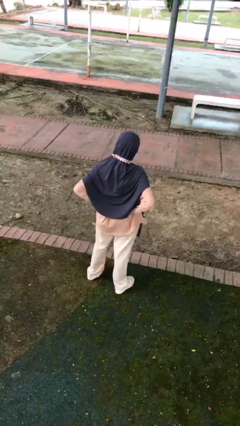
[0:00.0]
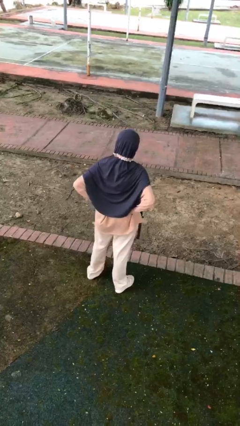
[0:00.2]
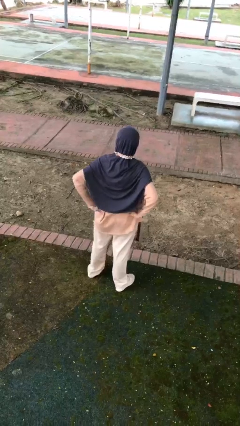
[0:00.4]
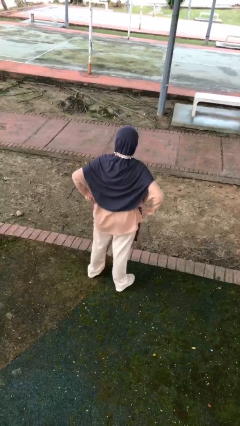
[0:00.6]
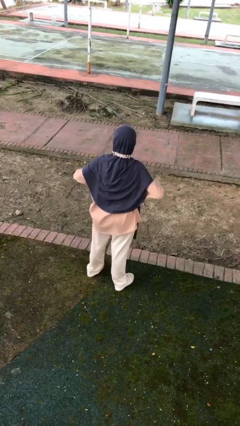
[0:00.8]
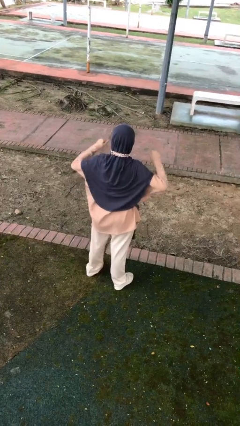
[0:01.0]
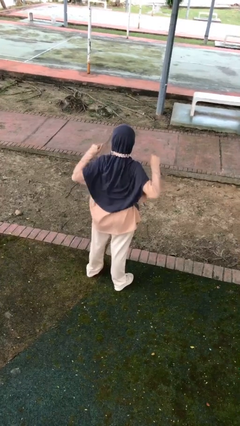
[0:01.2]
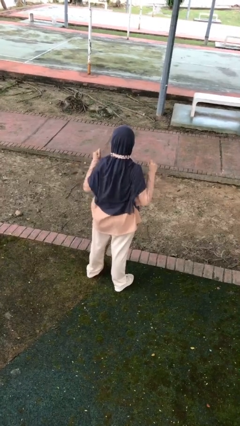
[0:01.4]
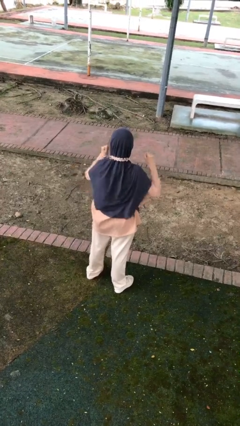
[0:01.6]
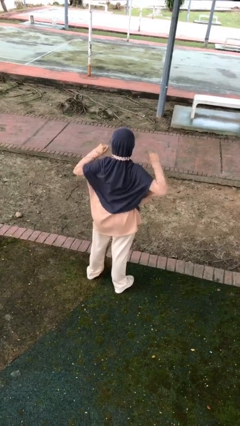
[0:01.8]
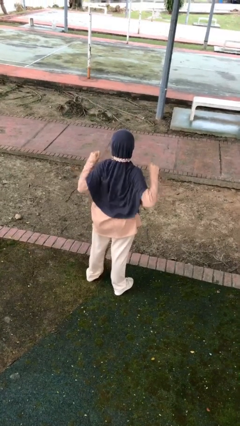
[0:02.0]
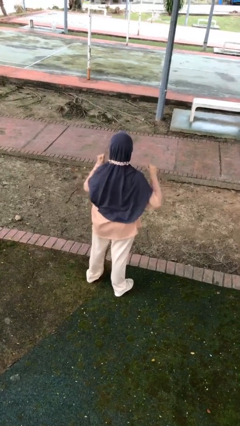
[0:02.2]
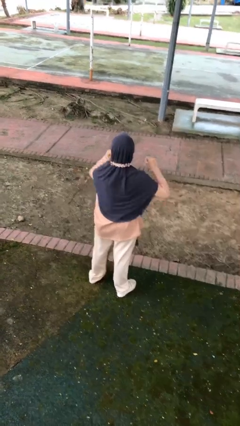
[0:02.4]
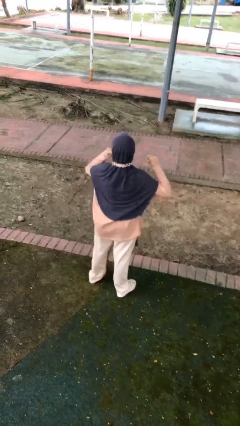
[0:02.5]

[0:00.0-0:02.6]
person stretches arms to side

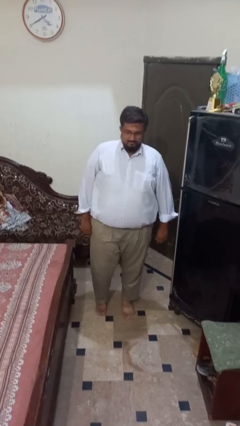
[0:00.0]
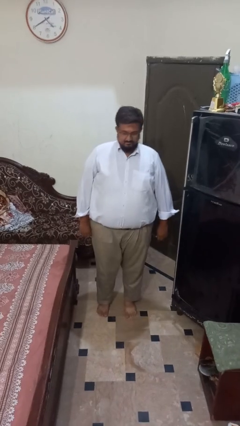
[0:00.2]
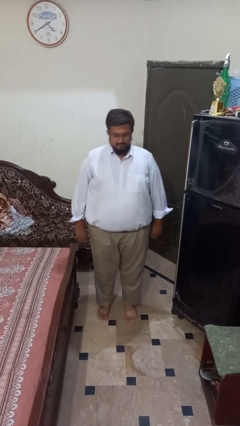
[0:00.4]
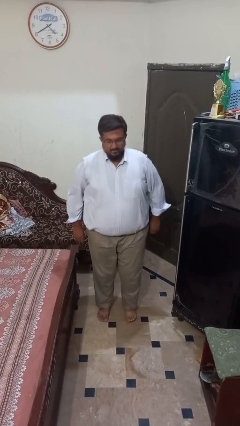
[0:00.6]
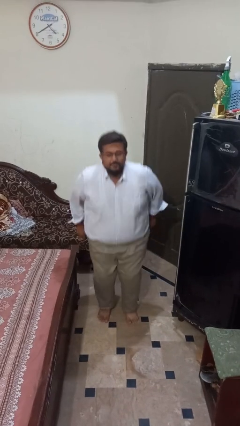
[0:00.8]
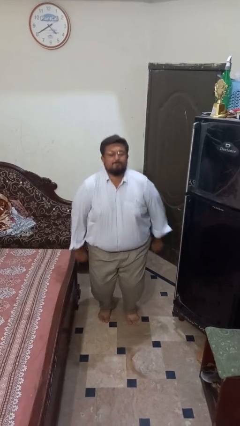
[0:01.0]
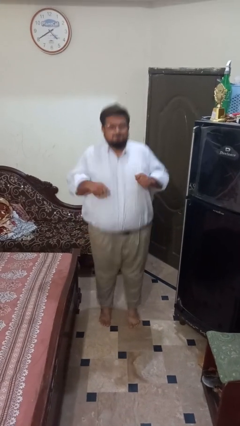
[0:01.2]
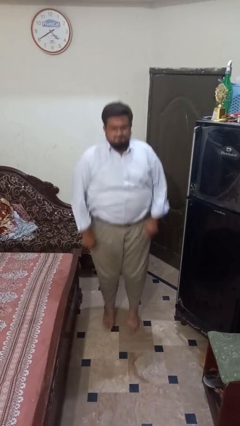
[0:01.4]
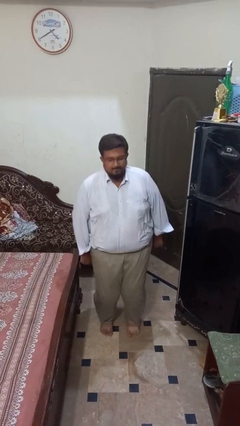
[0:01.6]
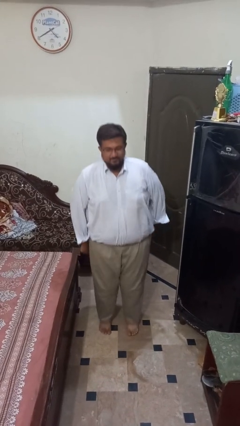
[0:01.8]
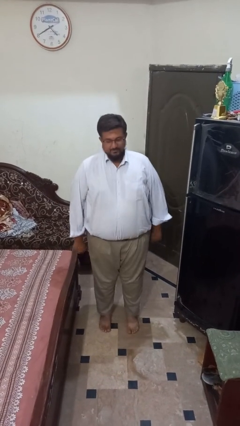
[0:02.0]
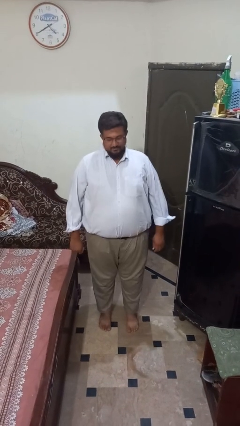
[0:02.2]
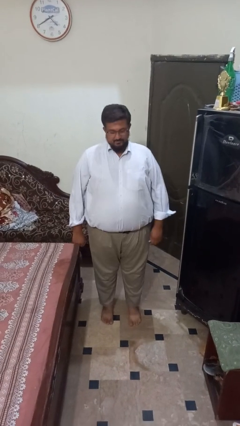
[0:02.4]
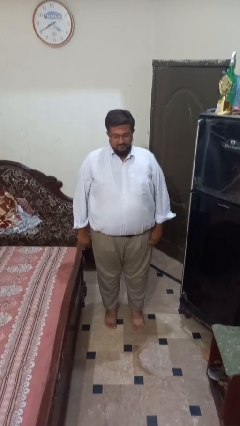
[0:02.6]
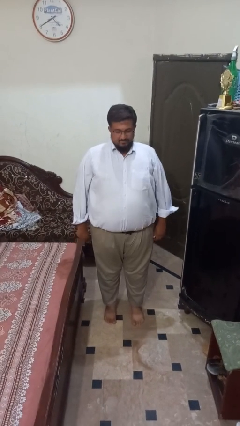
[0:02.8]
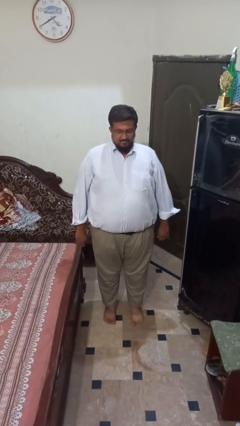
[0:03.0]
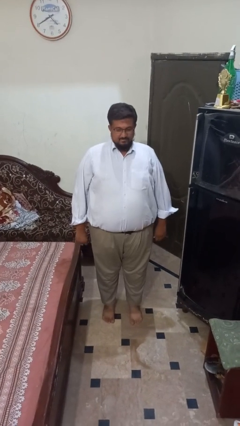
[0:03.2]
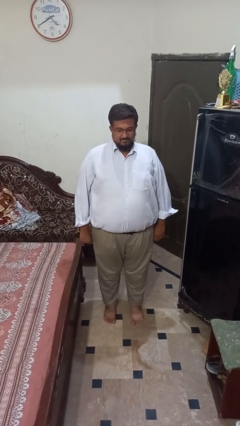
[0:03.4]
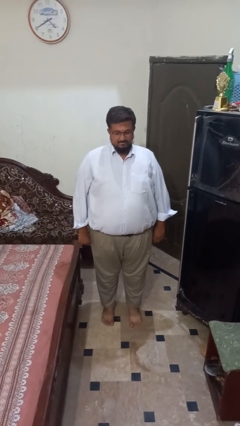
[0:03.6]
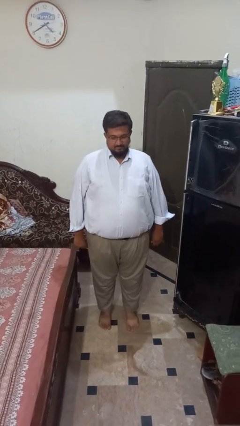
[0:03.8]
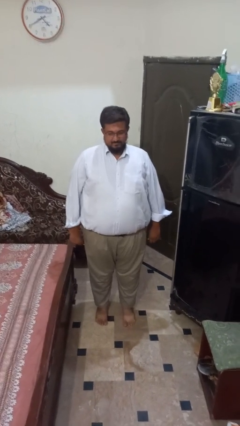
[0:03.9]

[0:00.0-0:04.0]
person jumps

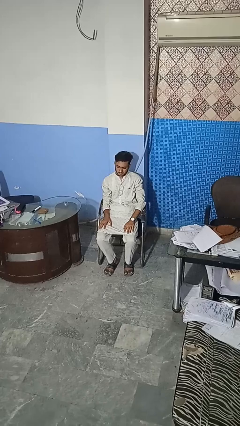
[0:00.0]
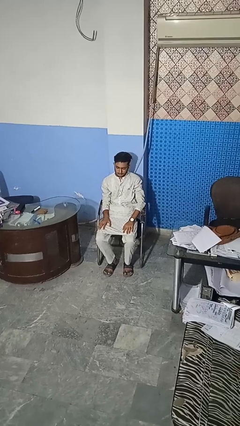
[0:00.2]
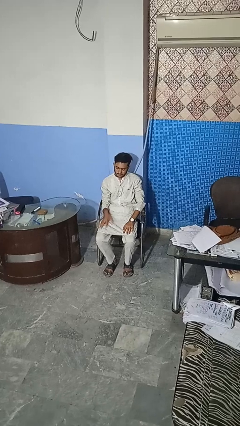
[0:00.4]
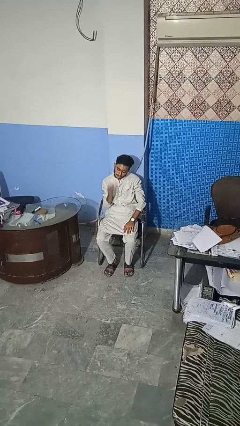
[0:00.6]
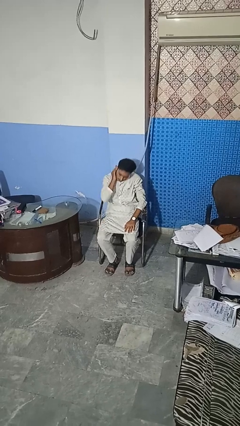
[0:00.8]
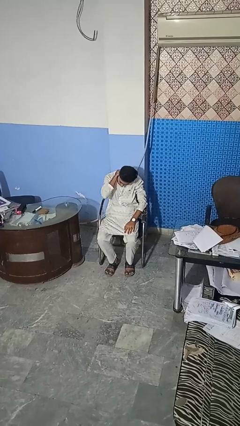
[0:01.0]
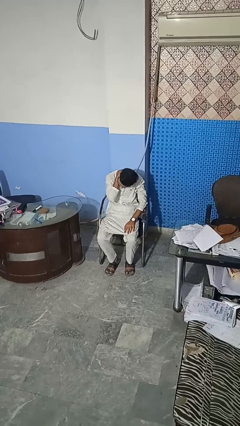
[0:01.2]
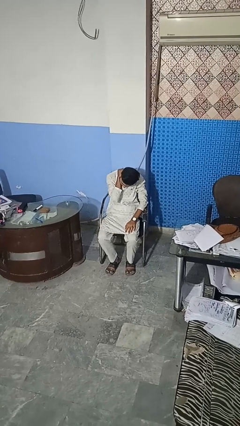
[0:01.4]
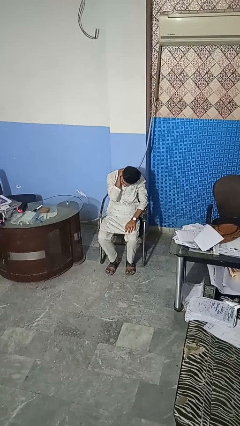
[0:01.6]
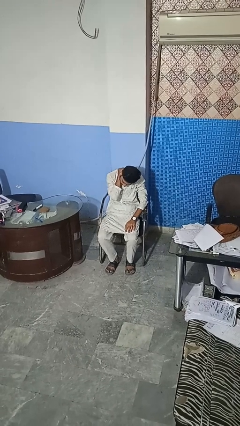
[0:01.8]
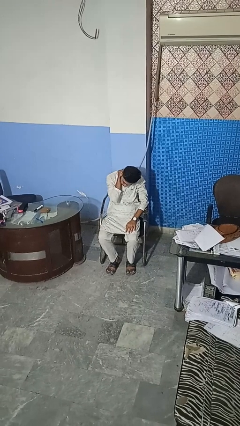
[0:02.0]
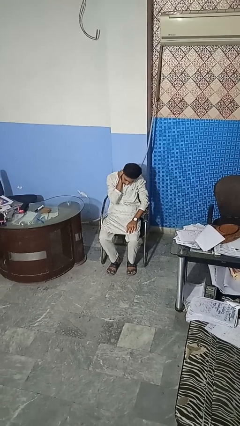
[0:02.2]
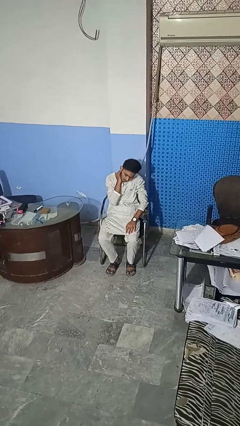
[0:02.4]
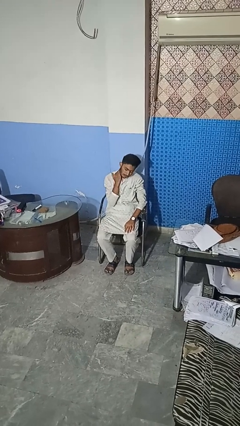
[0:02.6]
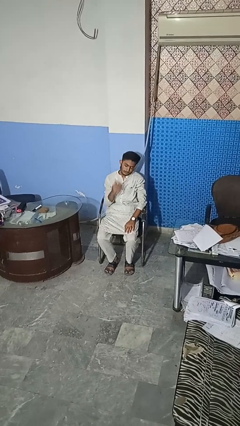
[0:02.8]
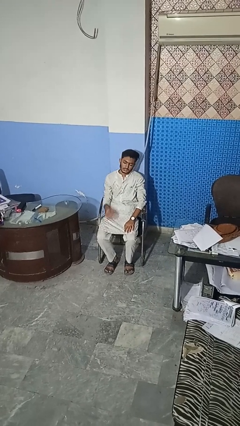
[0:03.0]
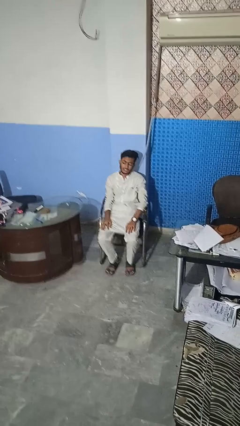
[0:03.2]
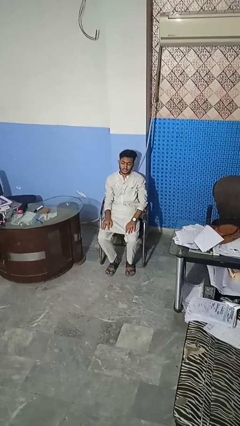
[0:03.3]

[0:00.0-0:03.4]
person rubs neck

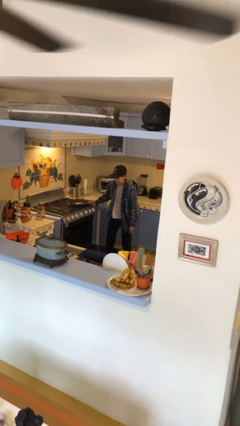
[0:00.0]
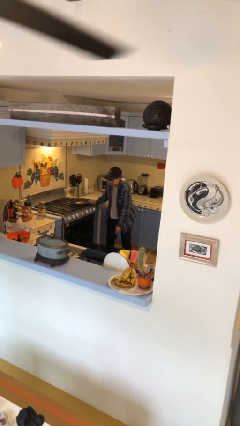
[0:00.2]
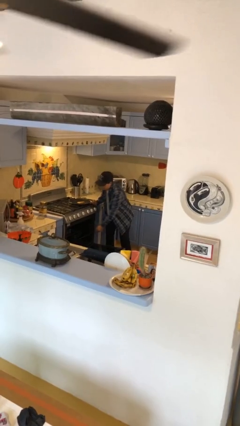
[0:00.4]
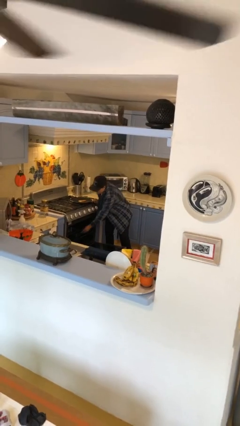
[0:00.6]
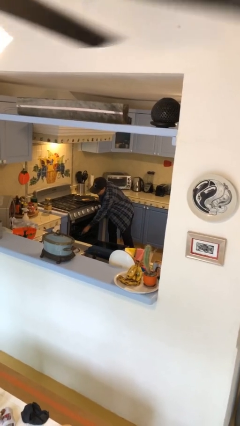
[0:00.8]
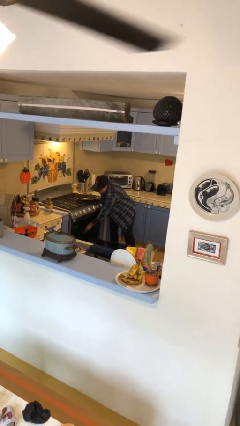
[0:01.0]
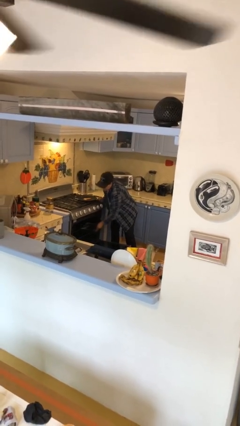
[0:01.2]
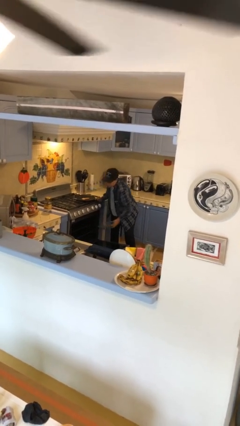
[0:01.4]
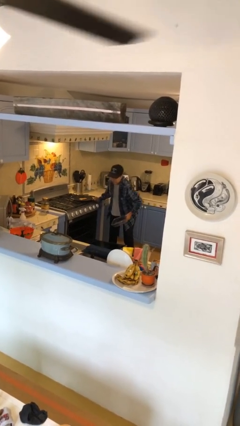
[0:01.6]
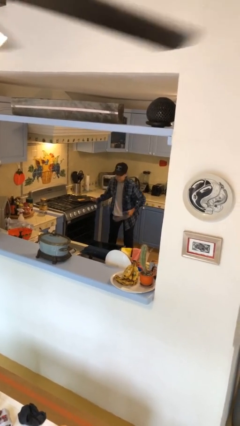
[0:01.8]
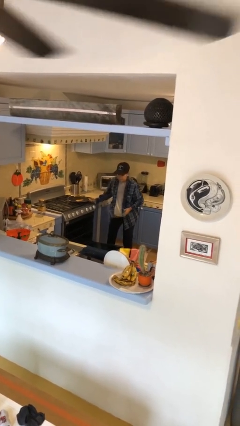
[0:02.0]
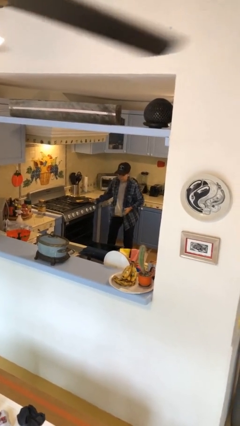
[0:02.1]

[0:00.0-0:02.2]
person takes object from oven

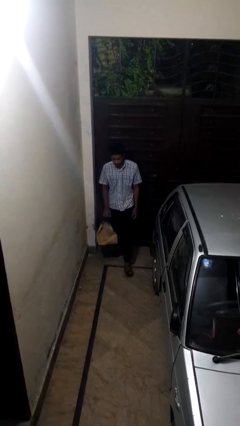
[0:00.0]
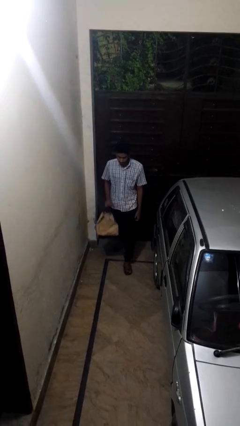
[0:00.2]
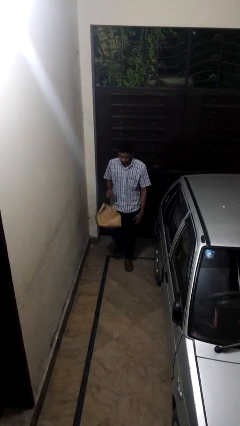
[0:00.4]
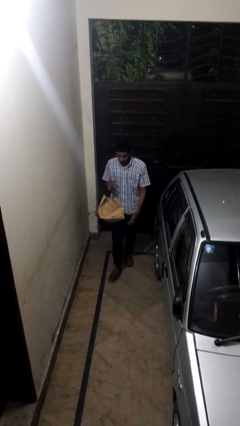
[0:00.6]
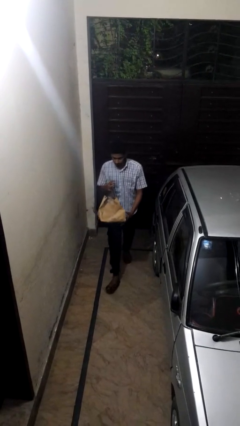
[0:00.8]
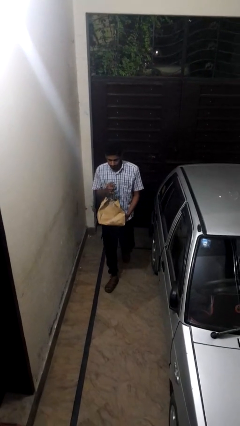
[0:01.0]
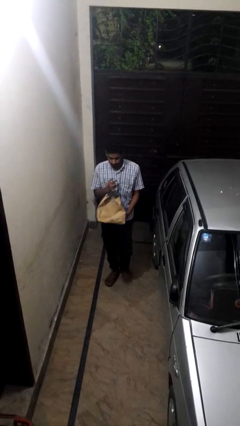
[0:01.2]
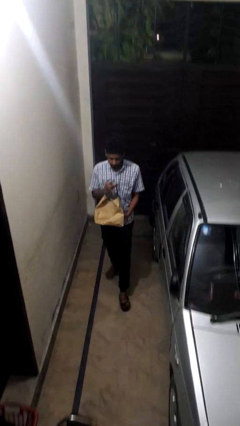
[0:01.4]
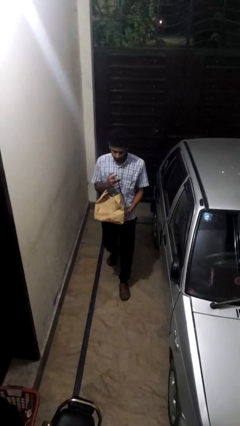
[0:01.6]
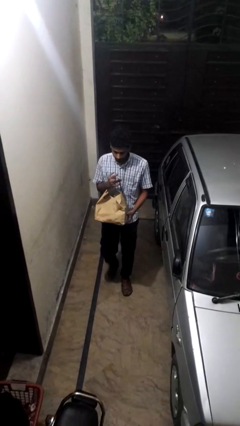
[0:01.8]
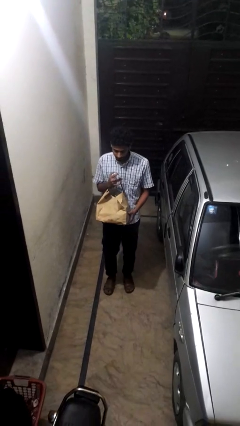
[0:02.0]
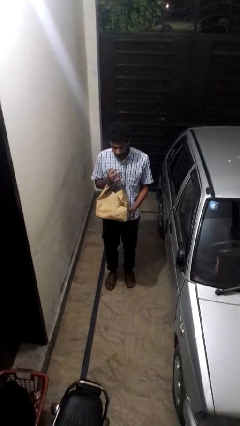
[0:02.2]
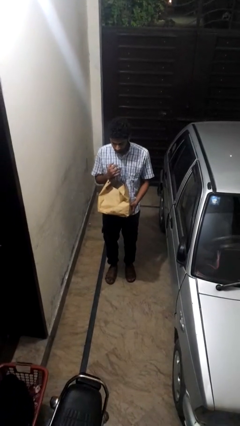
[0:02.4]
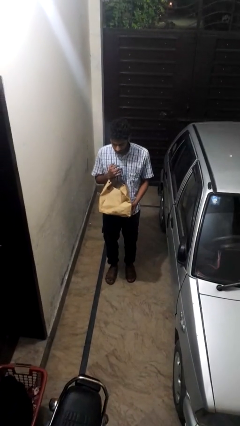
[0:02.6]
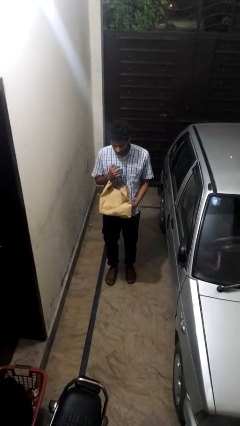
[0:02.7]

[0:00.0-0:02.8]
person carries groceries

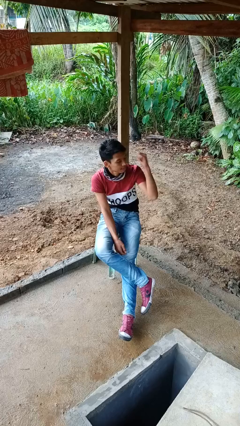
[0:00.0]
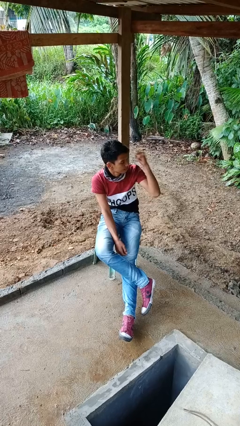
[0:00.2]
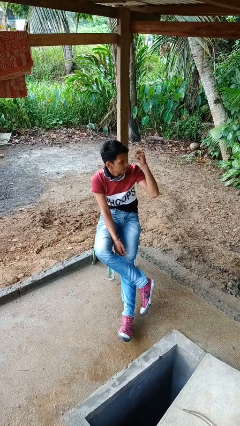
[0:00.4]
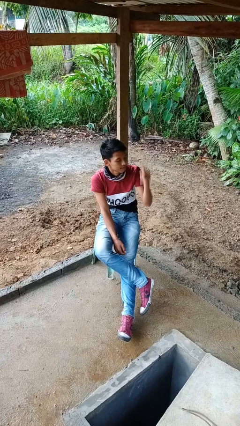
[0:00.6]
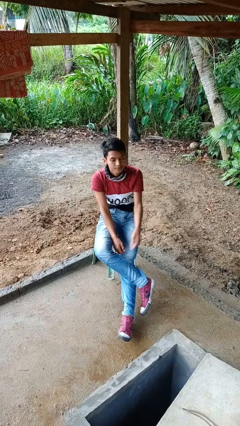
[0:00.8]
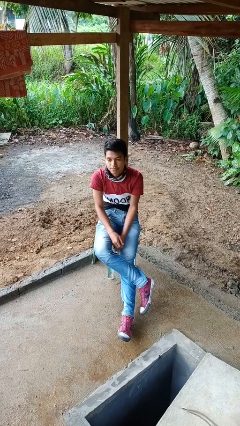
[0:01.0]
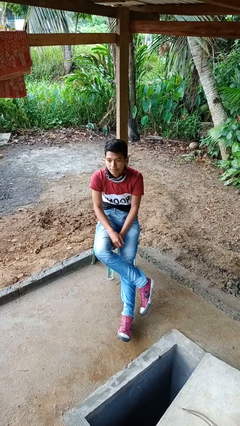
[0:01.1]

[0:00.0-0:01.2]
person gestures behind me

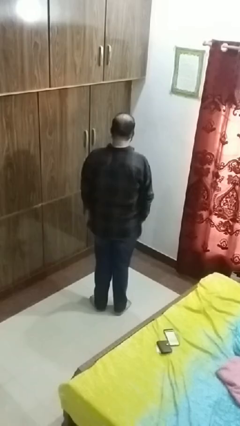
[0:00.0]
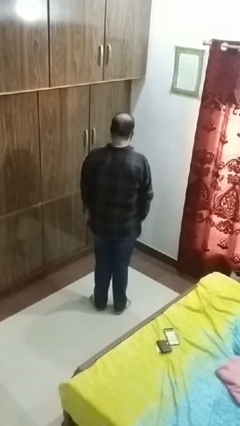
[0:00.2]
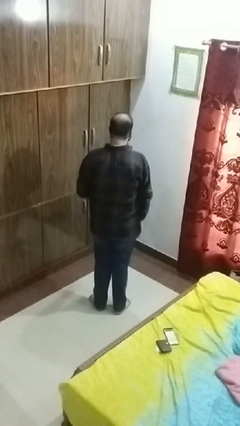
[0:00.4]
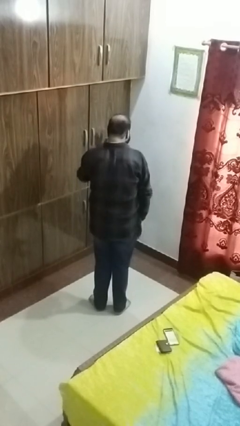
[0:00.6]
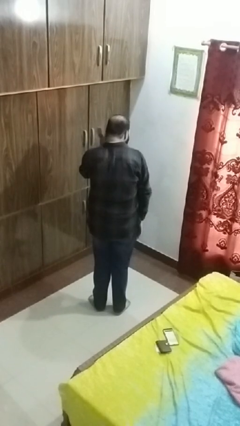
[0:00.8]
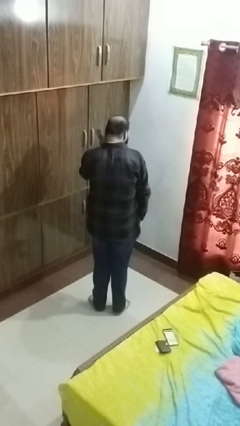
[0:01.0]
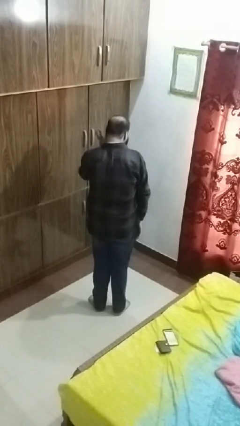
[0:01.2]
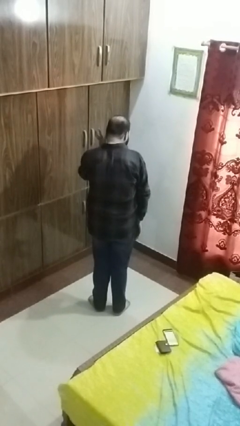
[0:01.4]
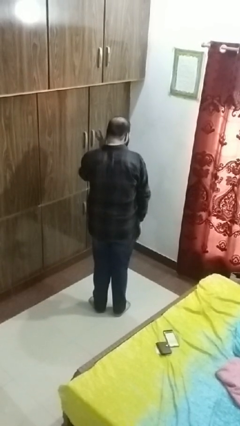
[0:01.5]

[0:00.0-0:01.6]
person gestures listen closely
